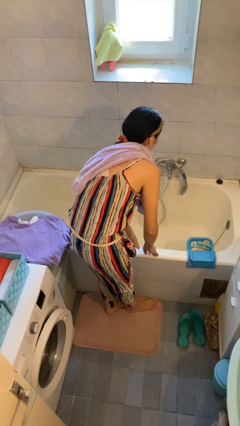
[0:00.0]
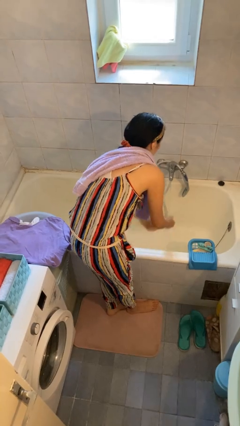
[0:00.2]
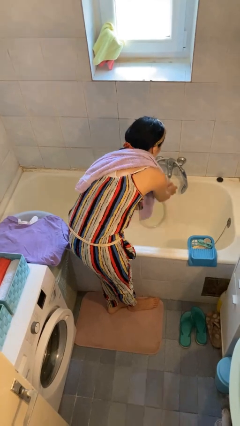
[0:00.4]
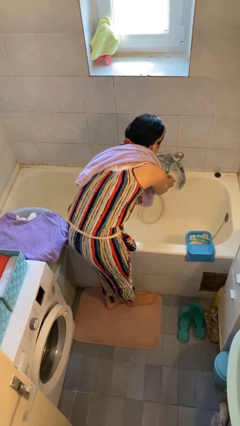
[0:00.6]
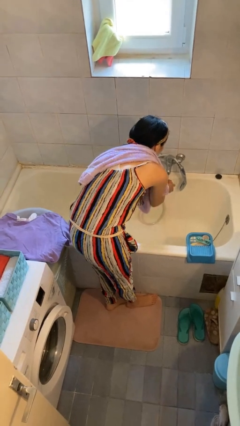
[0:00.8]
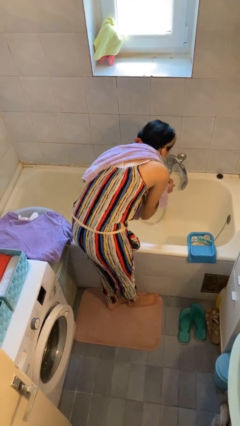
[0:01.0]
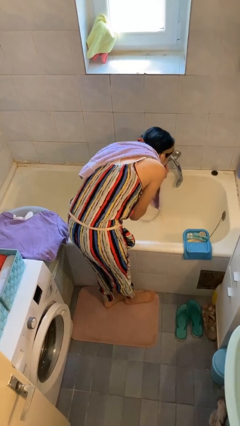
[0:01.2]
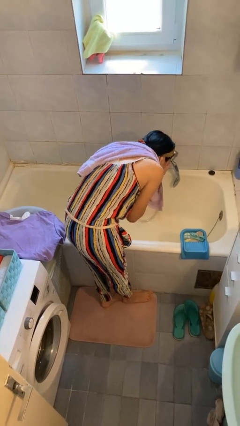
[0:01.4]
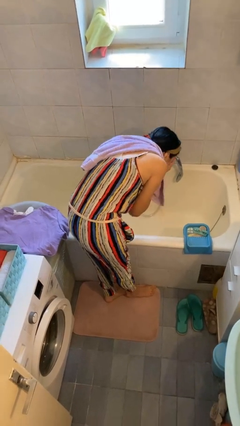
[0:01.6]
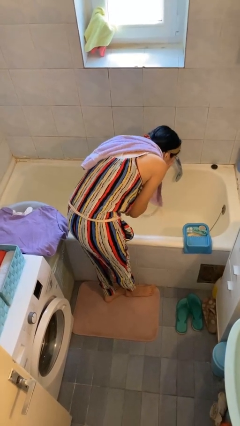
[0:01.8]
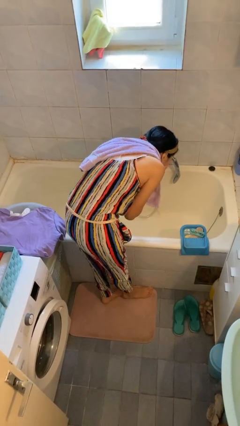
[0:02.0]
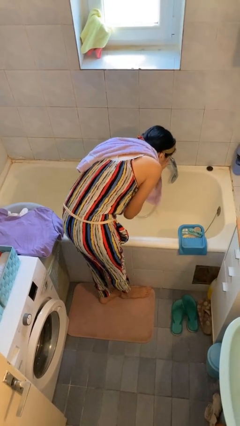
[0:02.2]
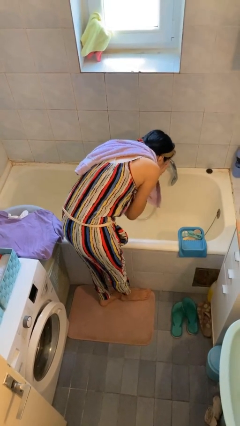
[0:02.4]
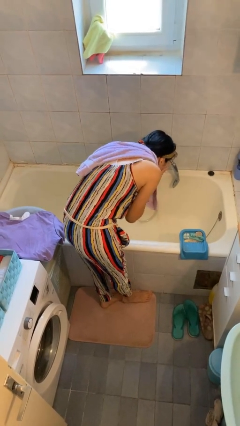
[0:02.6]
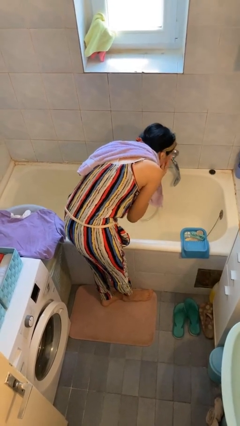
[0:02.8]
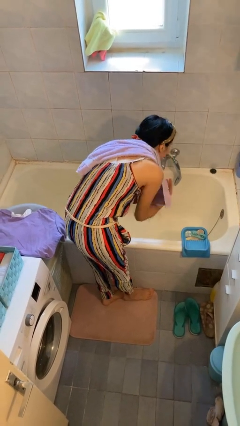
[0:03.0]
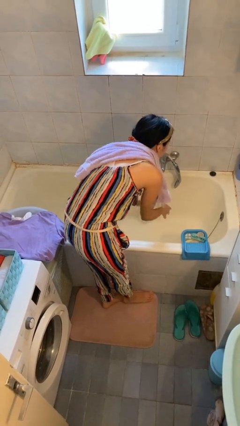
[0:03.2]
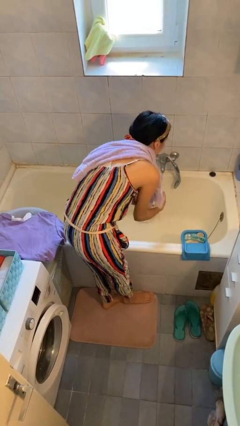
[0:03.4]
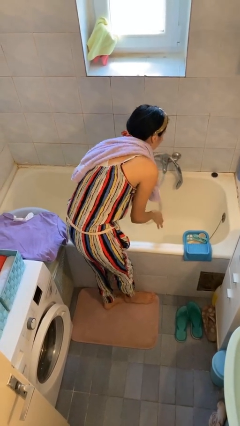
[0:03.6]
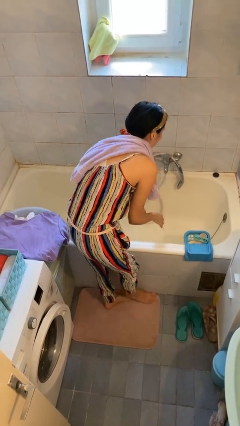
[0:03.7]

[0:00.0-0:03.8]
person washes face

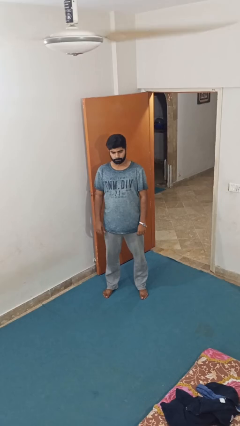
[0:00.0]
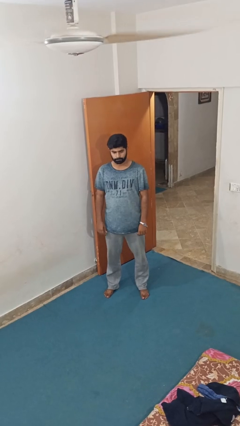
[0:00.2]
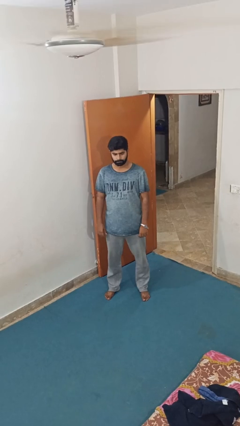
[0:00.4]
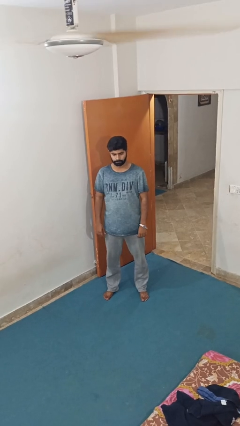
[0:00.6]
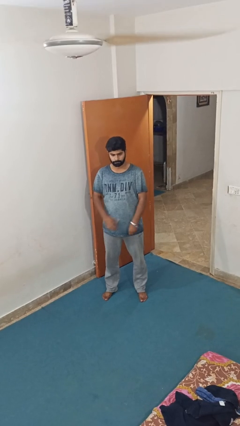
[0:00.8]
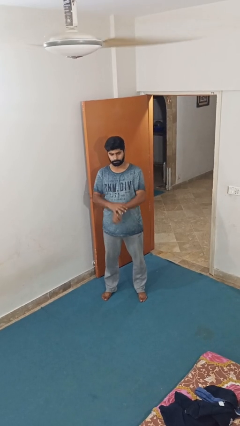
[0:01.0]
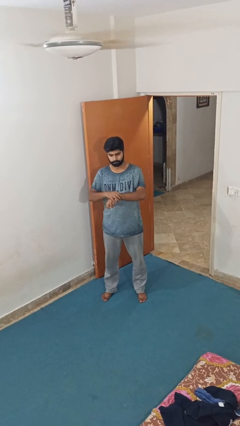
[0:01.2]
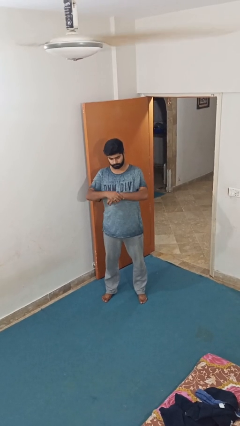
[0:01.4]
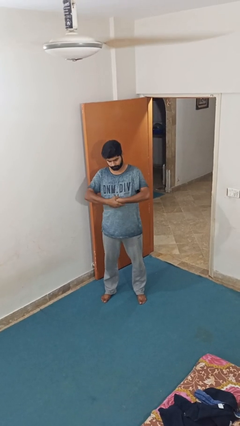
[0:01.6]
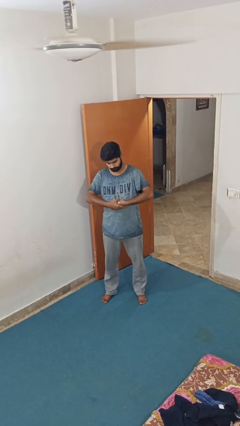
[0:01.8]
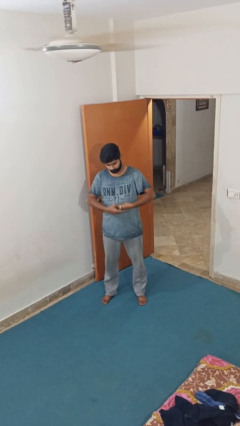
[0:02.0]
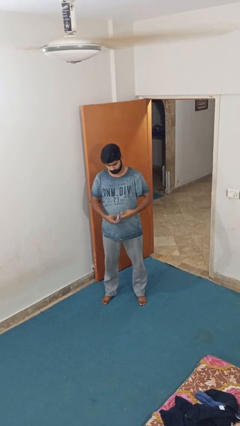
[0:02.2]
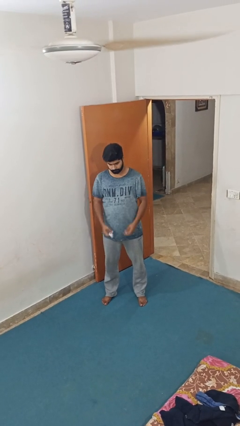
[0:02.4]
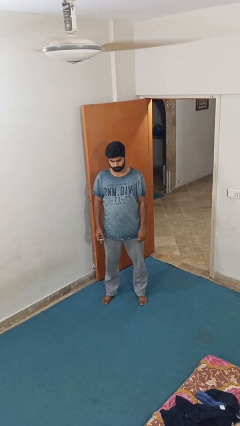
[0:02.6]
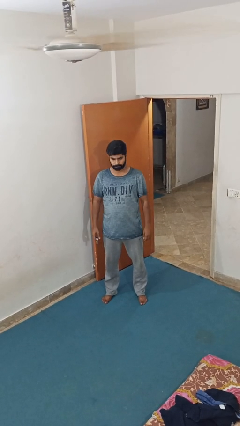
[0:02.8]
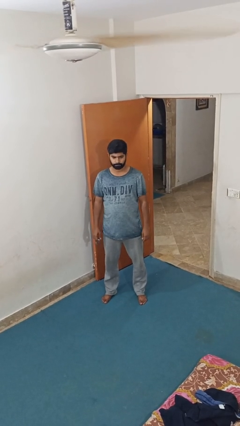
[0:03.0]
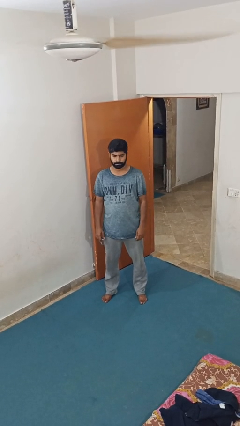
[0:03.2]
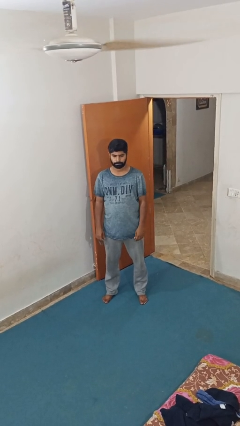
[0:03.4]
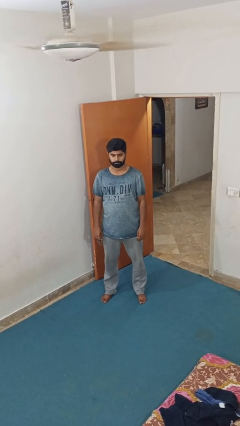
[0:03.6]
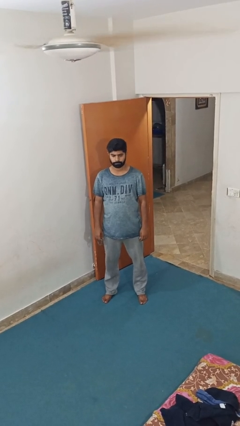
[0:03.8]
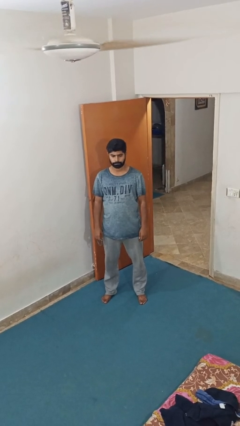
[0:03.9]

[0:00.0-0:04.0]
person takes off wristwatch

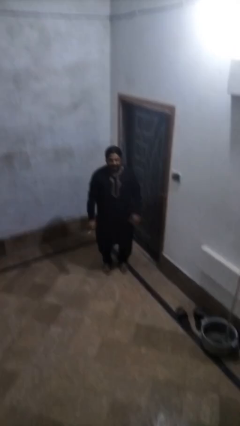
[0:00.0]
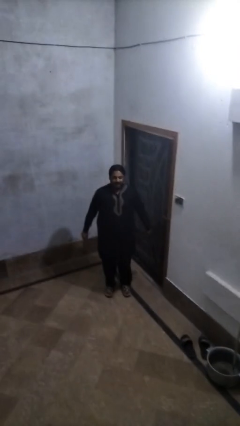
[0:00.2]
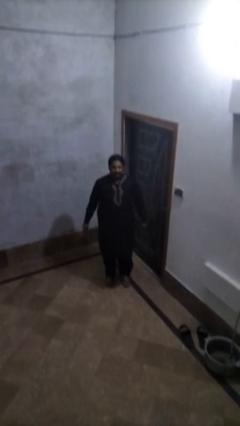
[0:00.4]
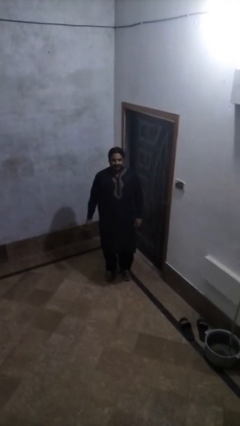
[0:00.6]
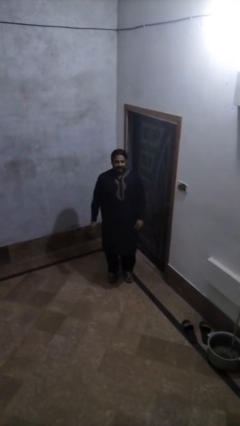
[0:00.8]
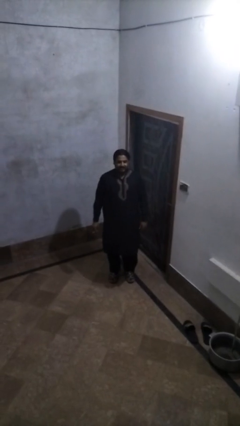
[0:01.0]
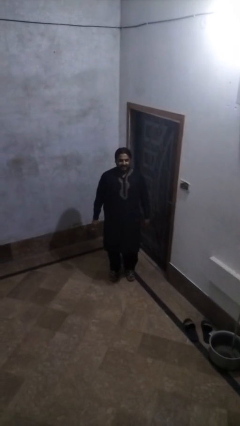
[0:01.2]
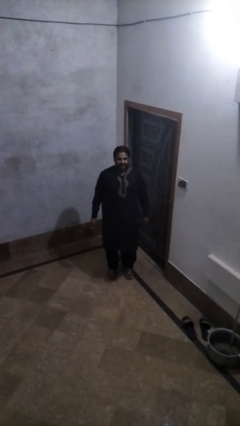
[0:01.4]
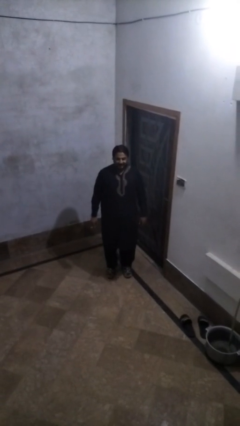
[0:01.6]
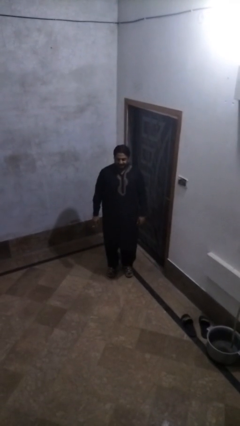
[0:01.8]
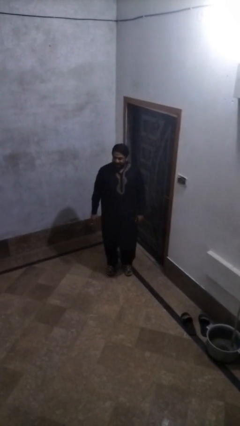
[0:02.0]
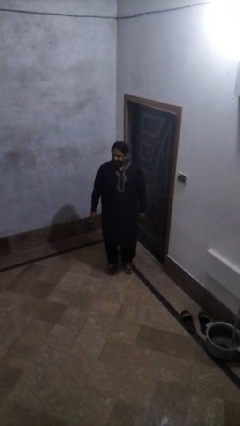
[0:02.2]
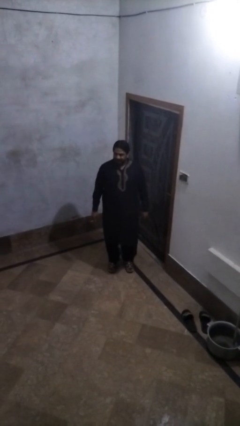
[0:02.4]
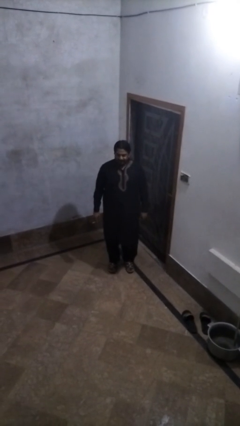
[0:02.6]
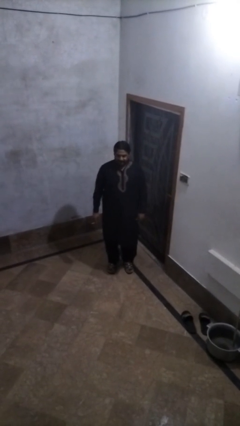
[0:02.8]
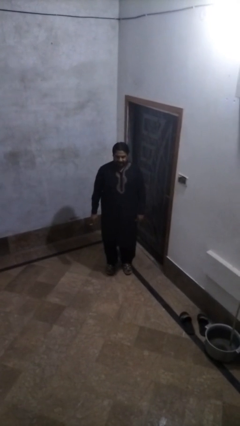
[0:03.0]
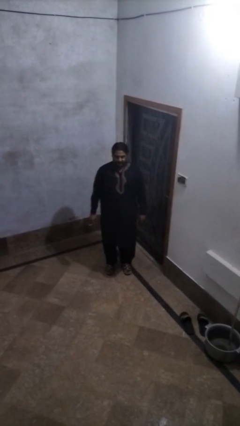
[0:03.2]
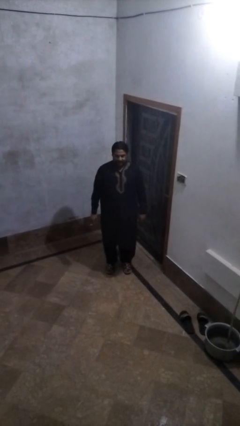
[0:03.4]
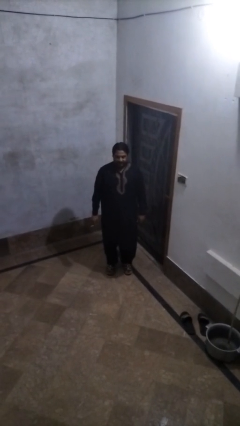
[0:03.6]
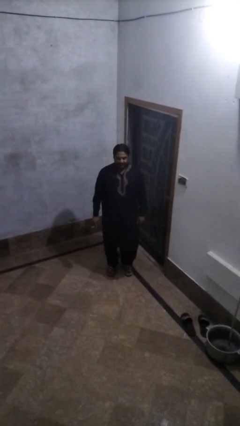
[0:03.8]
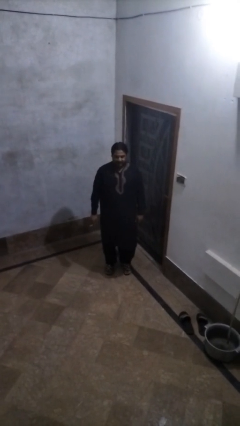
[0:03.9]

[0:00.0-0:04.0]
person stands up

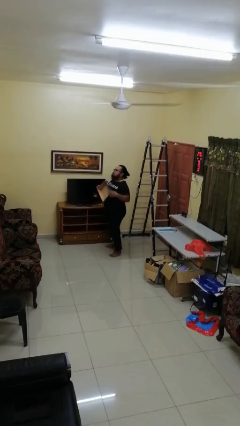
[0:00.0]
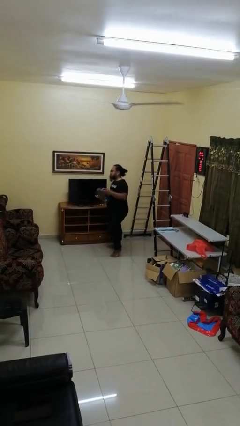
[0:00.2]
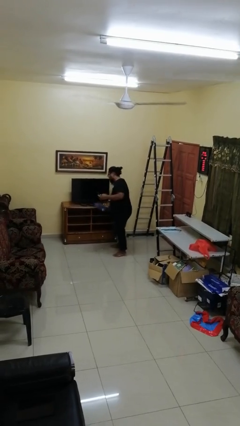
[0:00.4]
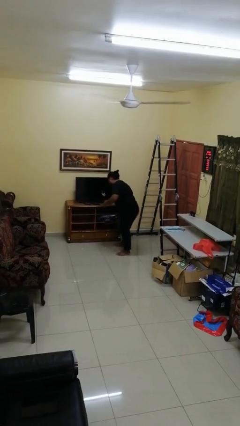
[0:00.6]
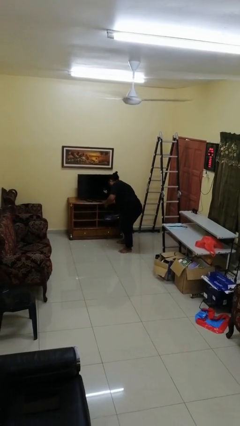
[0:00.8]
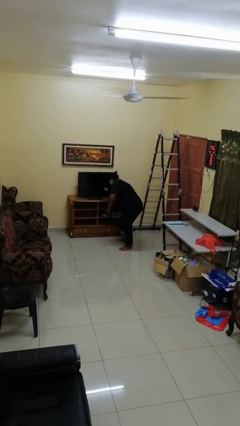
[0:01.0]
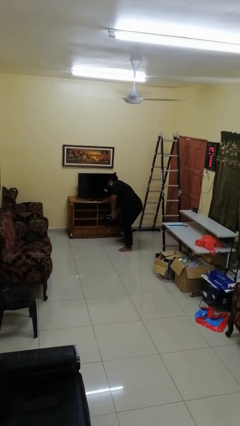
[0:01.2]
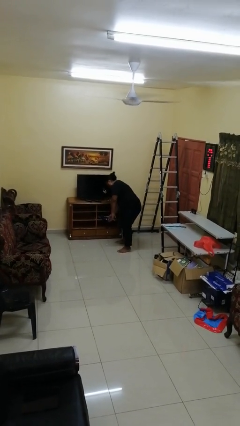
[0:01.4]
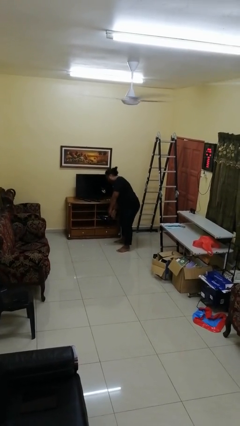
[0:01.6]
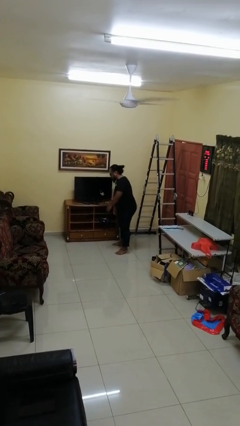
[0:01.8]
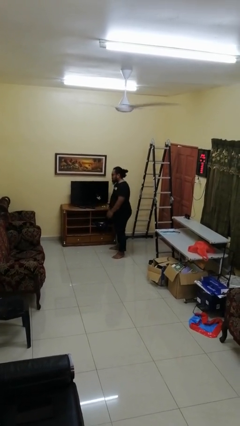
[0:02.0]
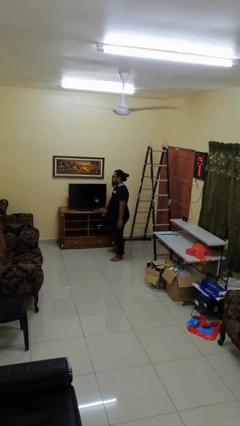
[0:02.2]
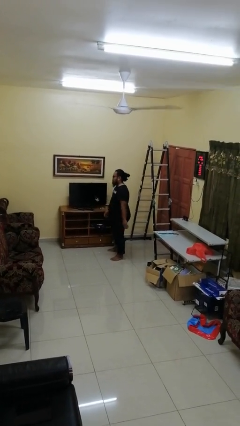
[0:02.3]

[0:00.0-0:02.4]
person puts down object into cabinet

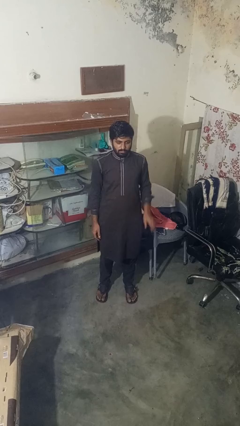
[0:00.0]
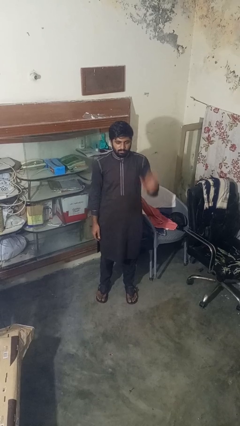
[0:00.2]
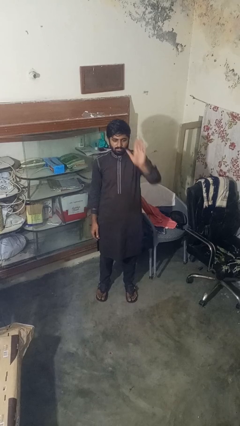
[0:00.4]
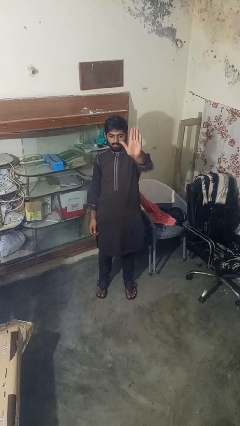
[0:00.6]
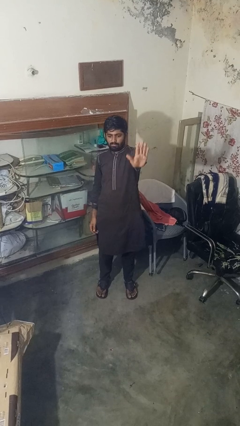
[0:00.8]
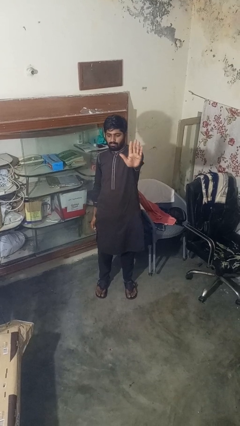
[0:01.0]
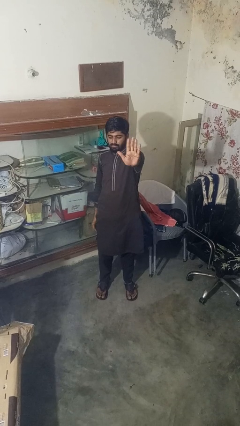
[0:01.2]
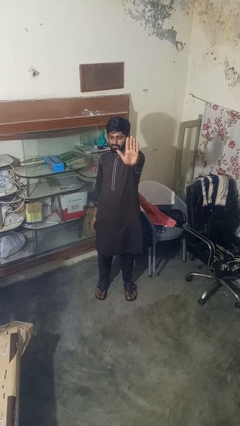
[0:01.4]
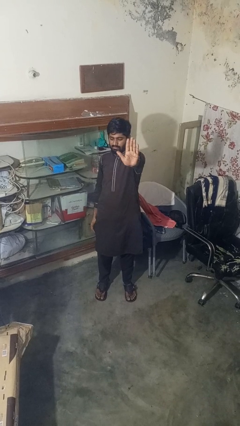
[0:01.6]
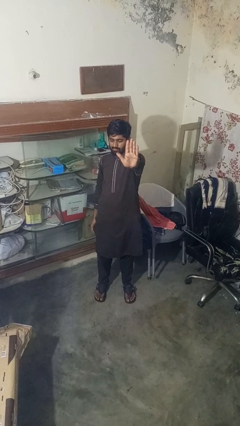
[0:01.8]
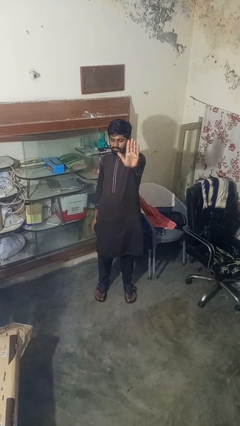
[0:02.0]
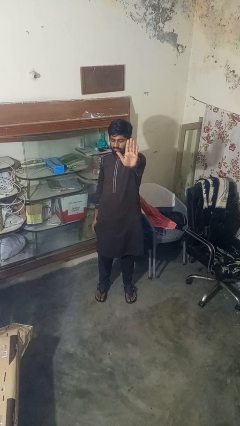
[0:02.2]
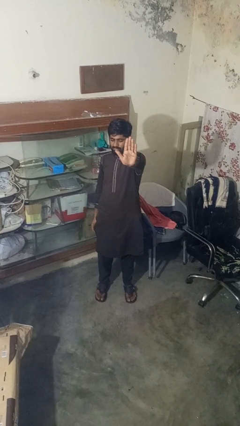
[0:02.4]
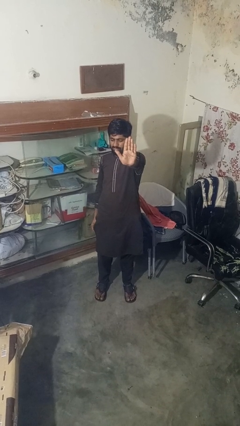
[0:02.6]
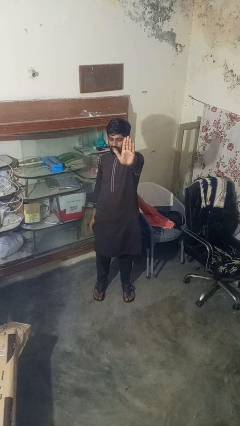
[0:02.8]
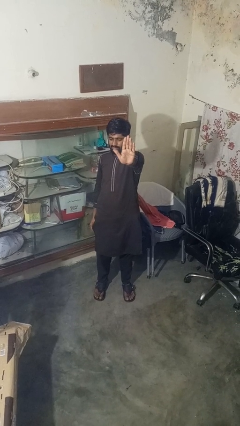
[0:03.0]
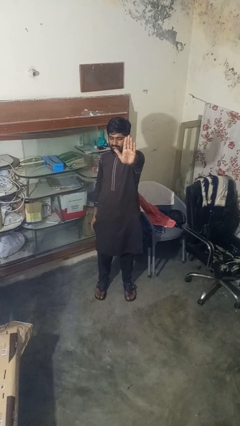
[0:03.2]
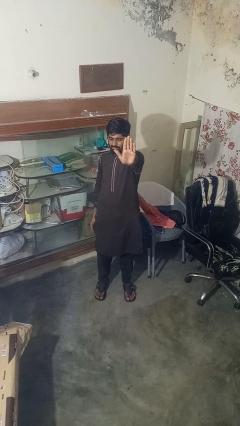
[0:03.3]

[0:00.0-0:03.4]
person gestures stop

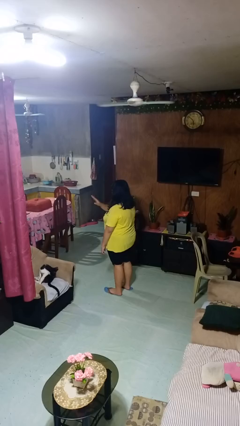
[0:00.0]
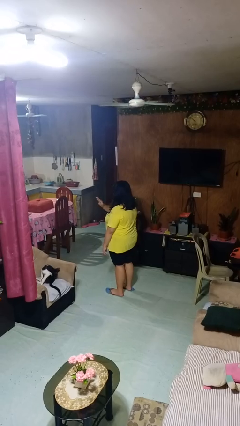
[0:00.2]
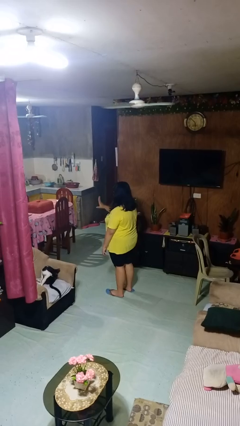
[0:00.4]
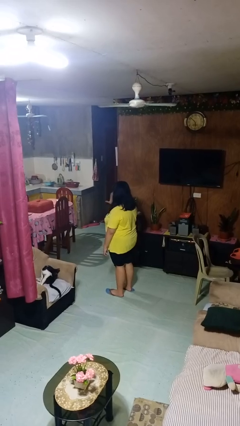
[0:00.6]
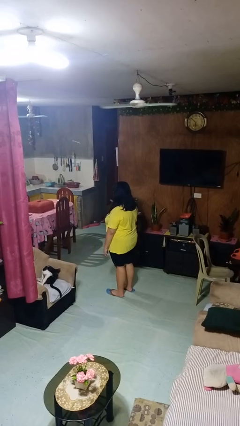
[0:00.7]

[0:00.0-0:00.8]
person gestures swipe right
